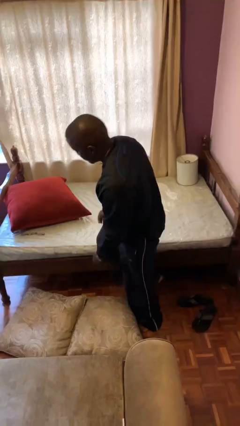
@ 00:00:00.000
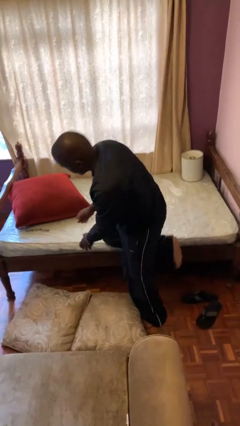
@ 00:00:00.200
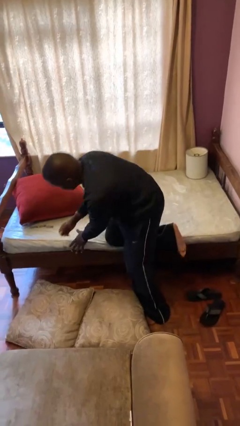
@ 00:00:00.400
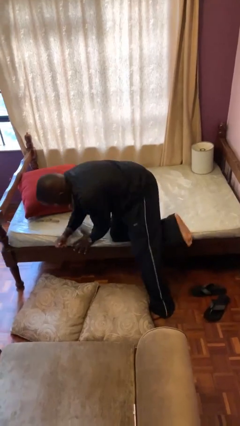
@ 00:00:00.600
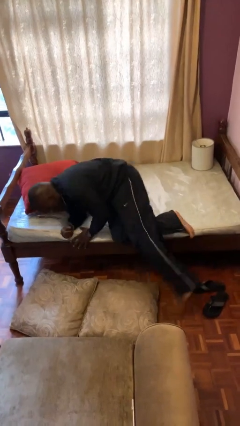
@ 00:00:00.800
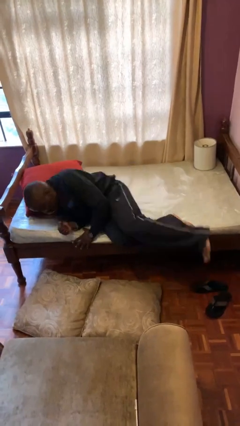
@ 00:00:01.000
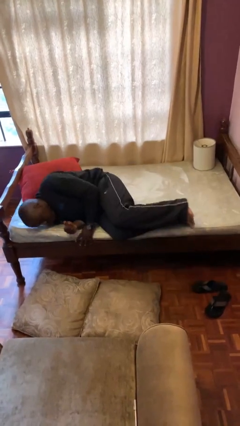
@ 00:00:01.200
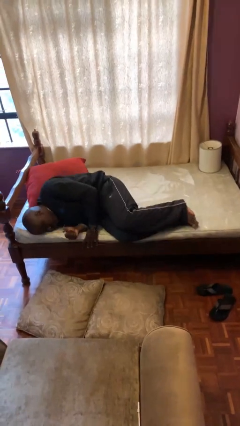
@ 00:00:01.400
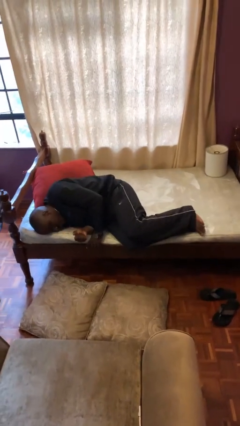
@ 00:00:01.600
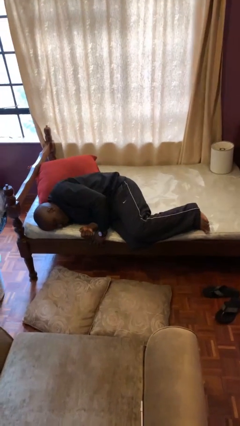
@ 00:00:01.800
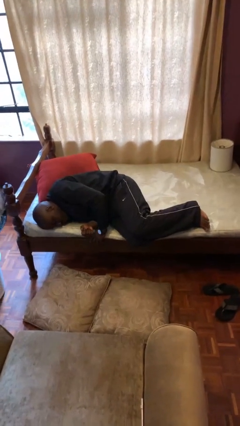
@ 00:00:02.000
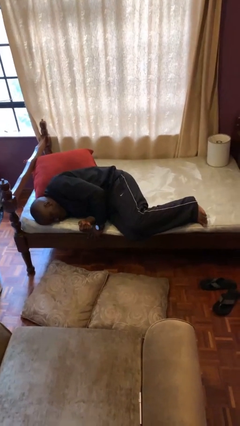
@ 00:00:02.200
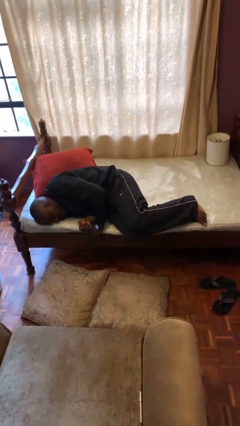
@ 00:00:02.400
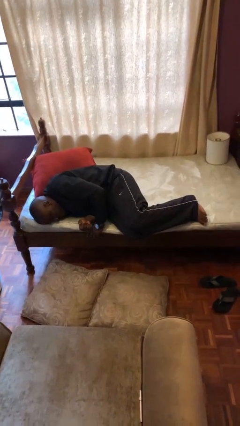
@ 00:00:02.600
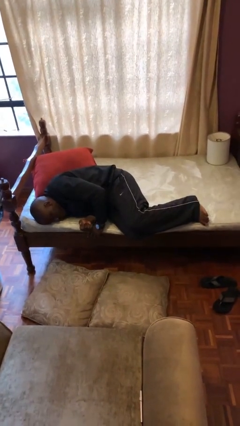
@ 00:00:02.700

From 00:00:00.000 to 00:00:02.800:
person lies down on bed

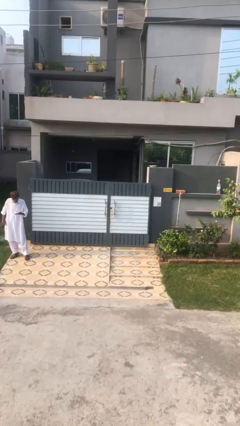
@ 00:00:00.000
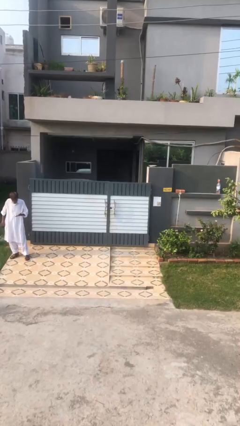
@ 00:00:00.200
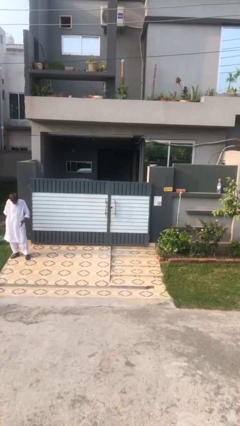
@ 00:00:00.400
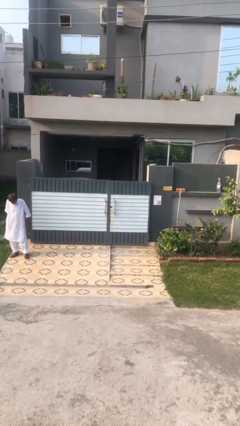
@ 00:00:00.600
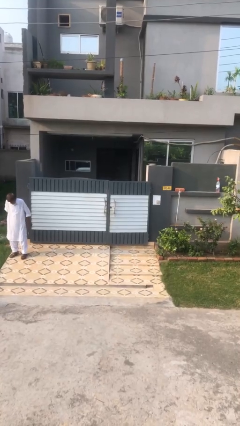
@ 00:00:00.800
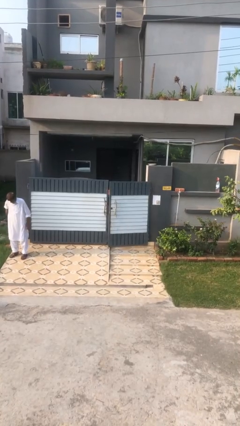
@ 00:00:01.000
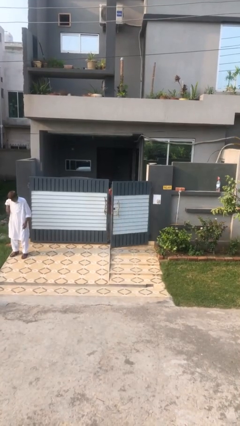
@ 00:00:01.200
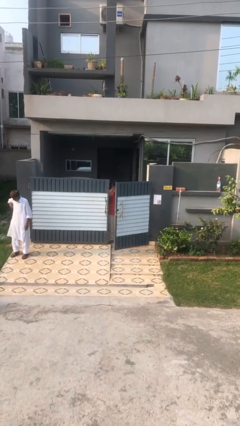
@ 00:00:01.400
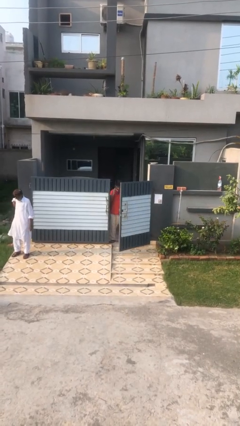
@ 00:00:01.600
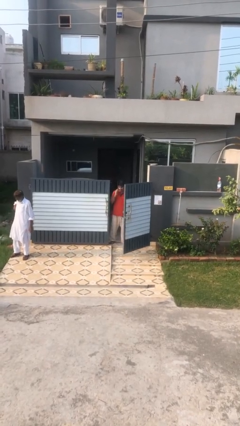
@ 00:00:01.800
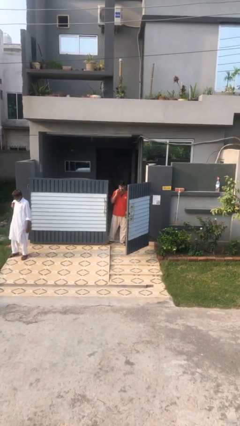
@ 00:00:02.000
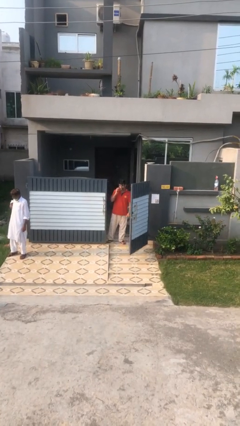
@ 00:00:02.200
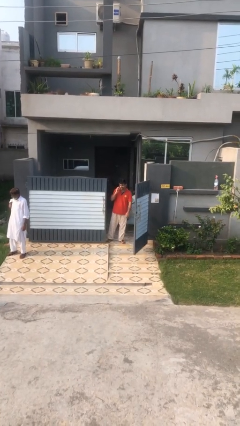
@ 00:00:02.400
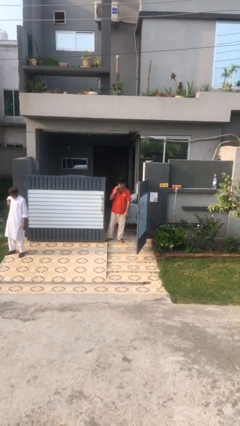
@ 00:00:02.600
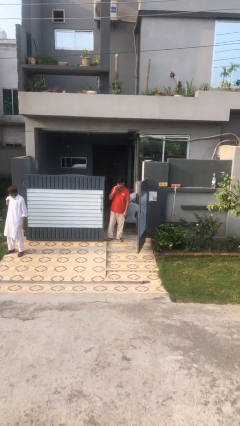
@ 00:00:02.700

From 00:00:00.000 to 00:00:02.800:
person opens facility door

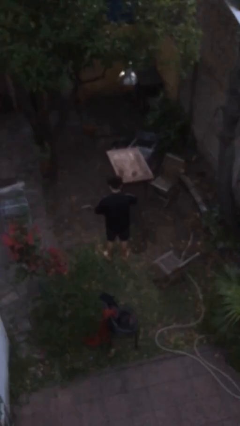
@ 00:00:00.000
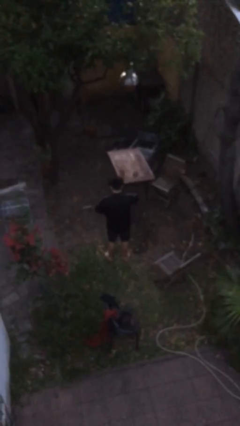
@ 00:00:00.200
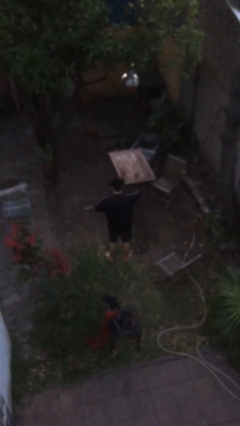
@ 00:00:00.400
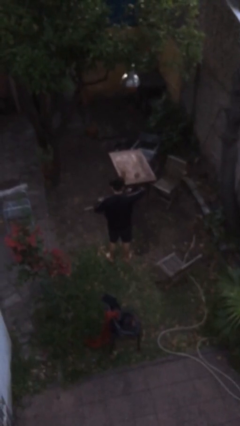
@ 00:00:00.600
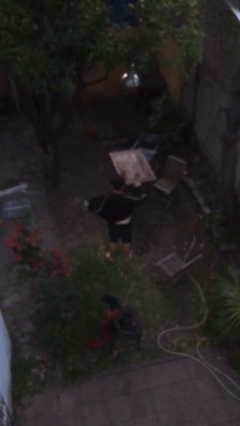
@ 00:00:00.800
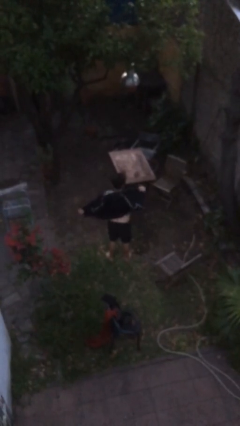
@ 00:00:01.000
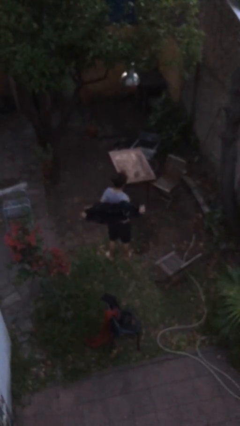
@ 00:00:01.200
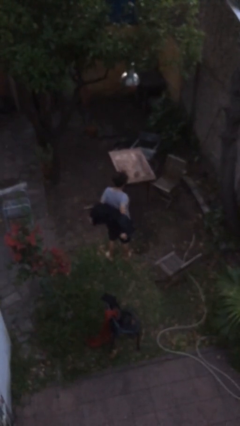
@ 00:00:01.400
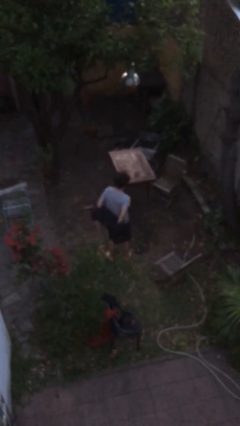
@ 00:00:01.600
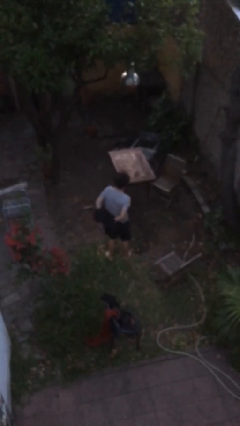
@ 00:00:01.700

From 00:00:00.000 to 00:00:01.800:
person takes off jacket

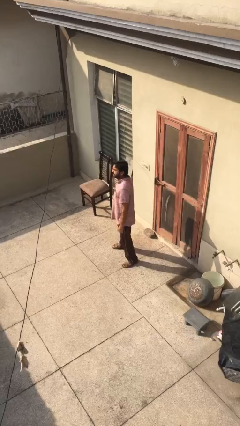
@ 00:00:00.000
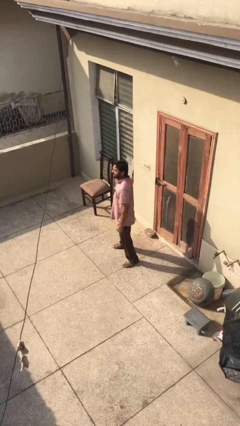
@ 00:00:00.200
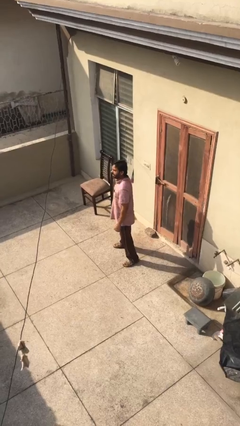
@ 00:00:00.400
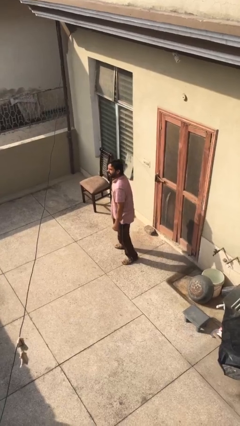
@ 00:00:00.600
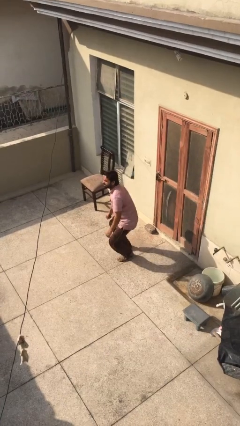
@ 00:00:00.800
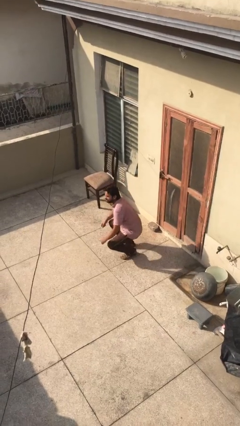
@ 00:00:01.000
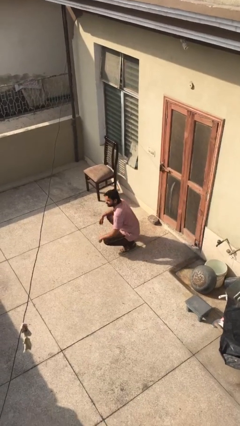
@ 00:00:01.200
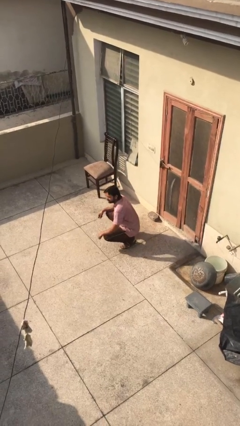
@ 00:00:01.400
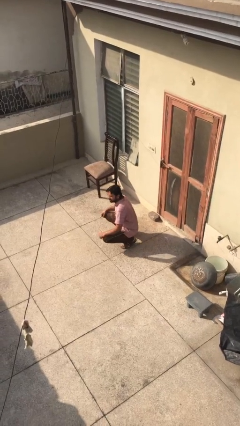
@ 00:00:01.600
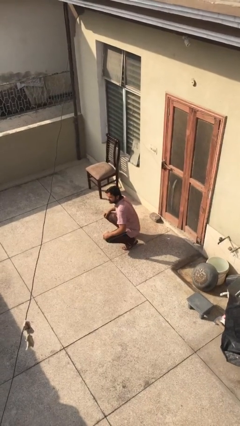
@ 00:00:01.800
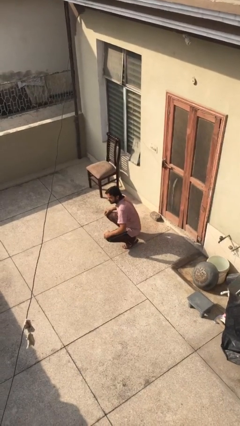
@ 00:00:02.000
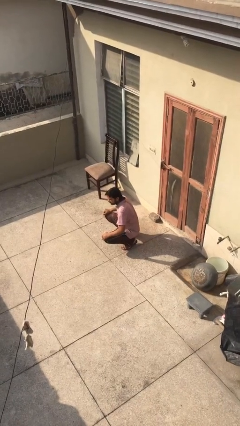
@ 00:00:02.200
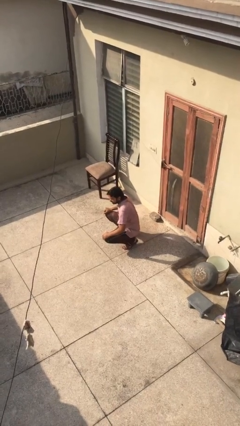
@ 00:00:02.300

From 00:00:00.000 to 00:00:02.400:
person sits down

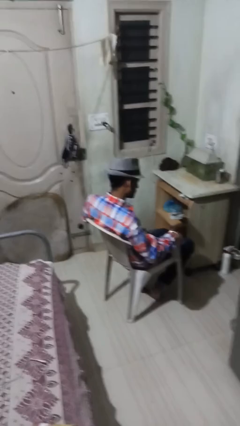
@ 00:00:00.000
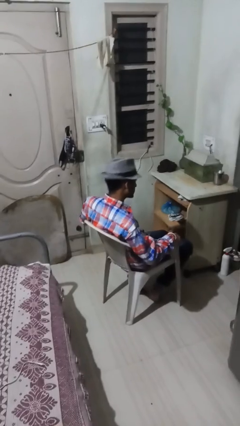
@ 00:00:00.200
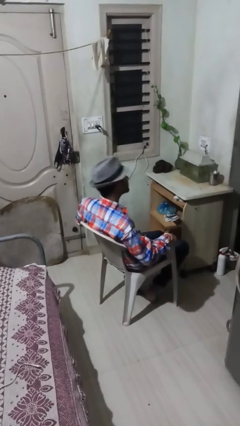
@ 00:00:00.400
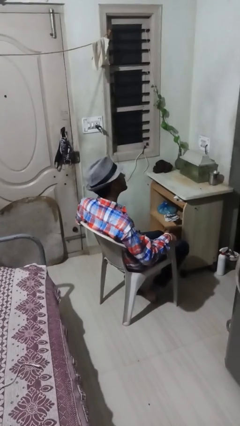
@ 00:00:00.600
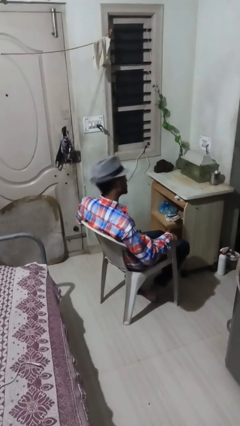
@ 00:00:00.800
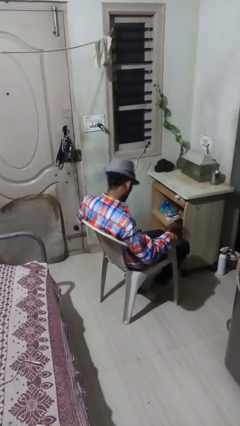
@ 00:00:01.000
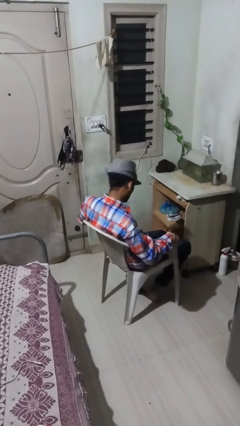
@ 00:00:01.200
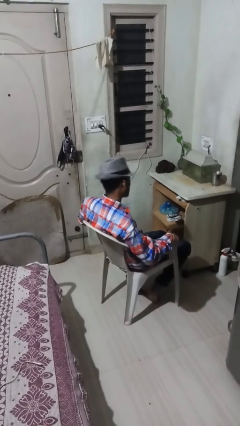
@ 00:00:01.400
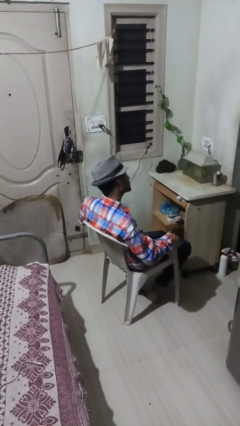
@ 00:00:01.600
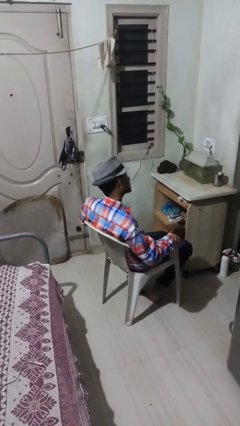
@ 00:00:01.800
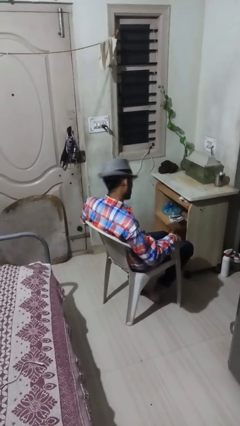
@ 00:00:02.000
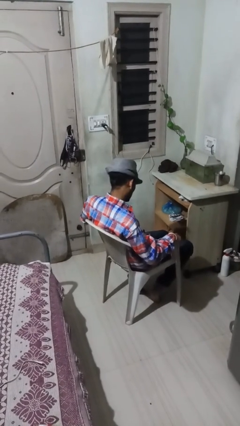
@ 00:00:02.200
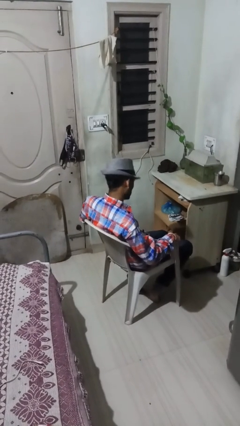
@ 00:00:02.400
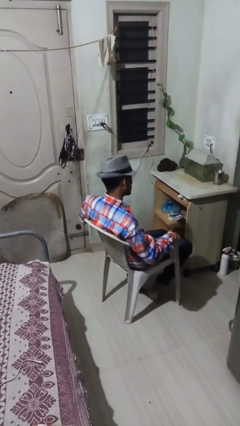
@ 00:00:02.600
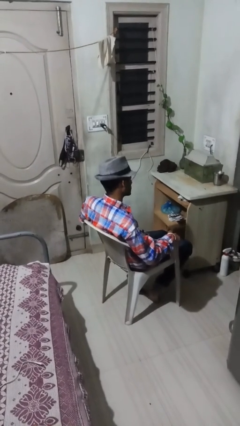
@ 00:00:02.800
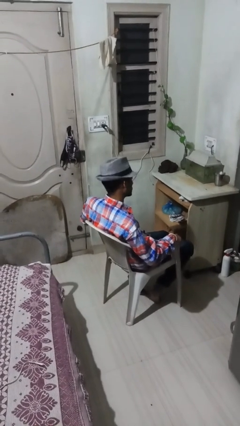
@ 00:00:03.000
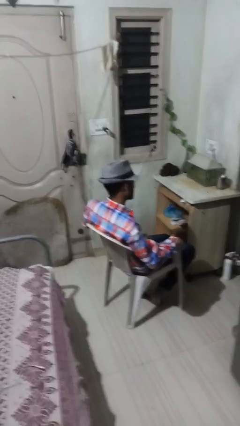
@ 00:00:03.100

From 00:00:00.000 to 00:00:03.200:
person nods head

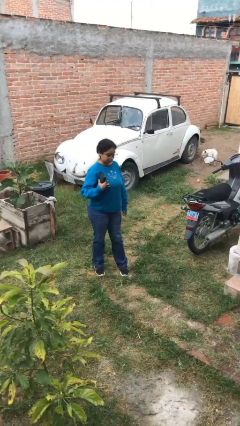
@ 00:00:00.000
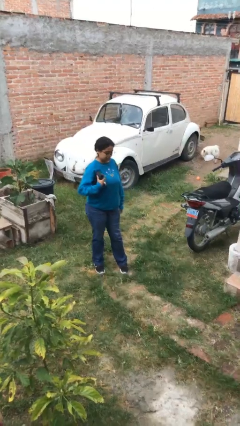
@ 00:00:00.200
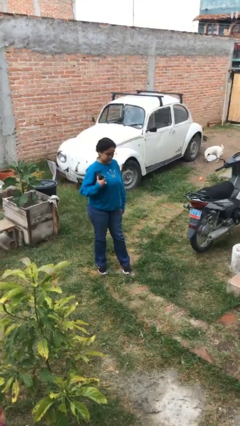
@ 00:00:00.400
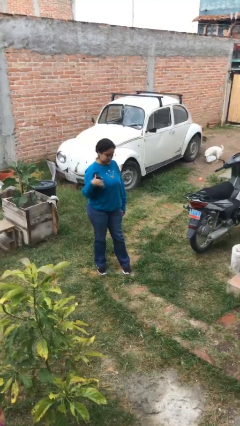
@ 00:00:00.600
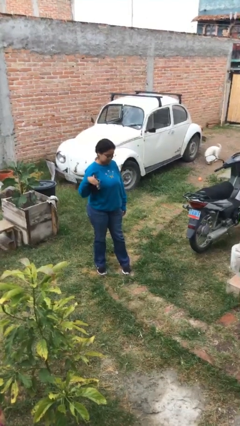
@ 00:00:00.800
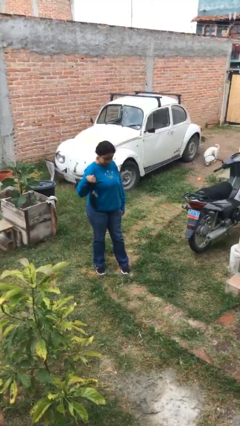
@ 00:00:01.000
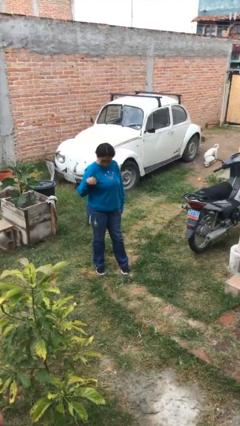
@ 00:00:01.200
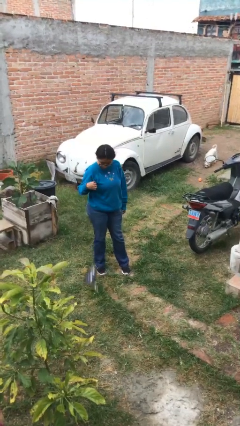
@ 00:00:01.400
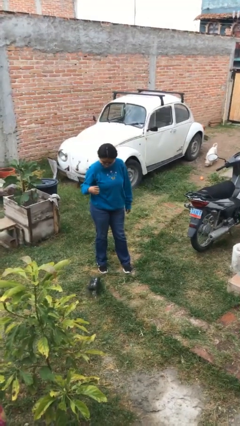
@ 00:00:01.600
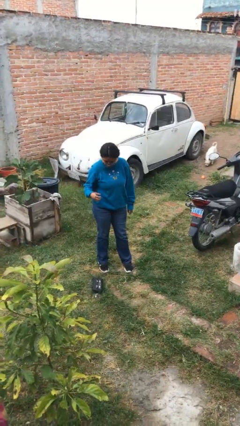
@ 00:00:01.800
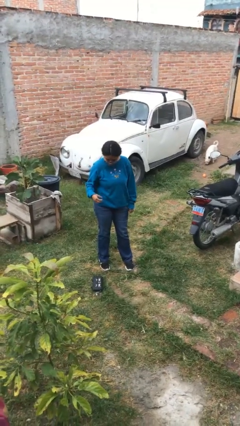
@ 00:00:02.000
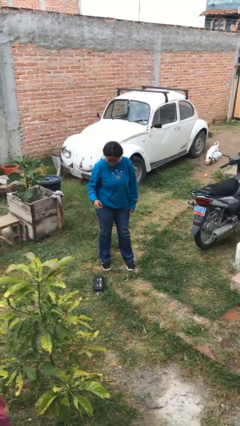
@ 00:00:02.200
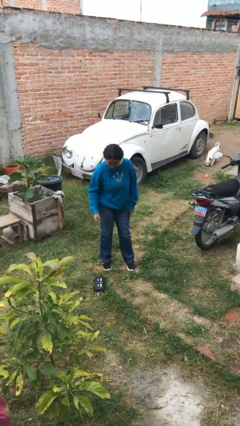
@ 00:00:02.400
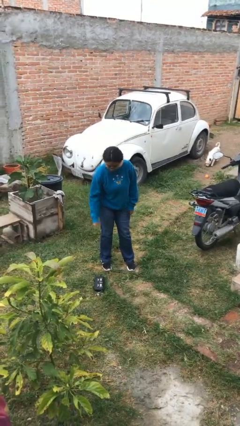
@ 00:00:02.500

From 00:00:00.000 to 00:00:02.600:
person drops object

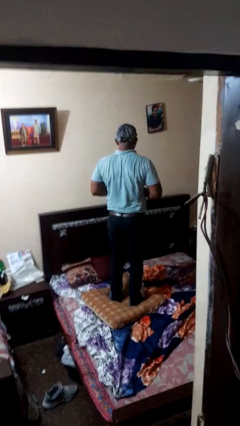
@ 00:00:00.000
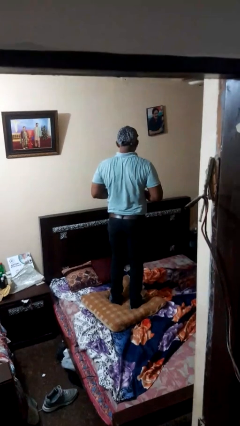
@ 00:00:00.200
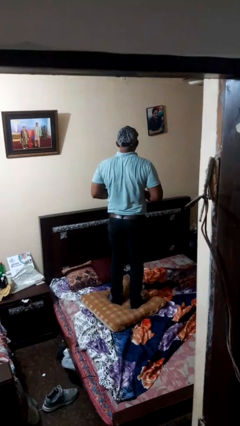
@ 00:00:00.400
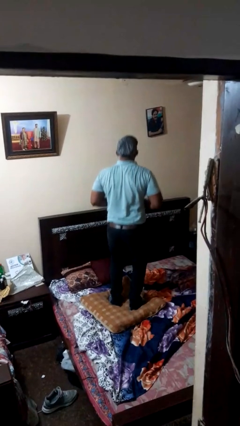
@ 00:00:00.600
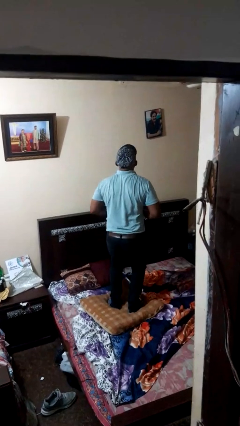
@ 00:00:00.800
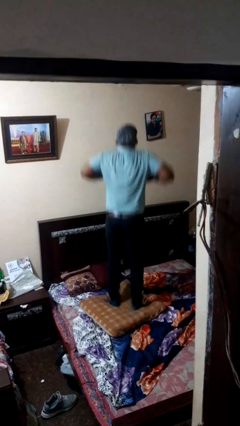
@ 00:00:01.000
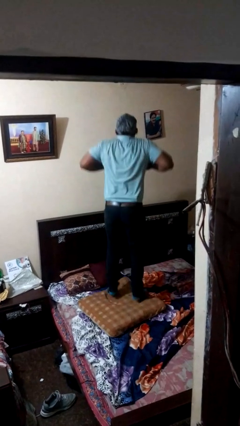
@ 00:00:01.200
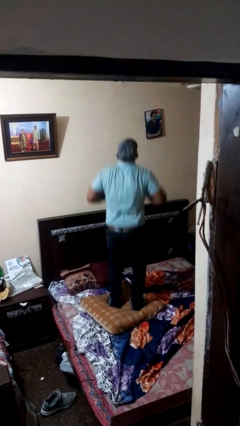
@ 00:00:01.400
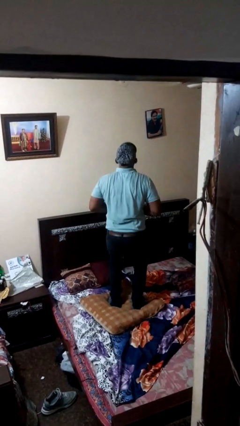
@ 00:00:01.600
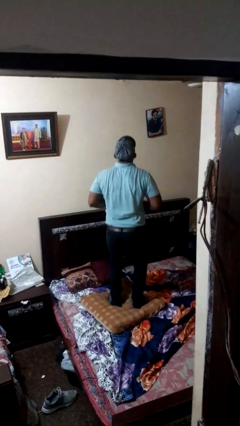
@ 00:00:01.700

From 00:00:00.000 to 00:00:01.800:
person jumps on bed
